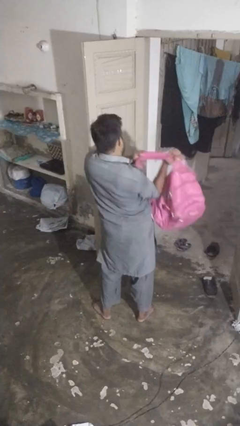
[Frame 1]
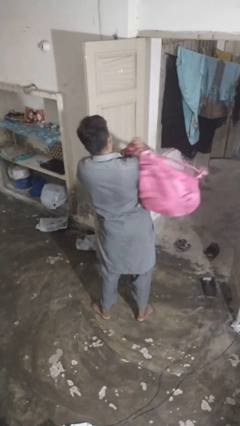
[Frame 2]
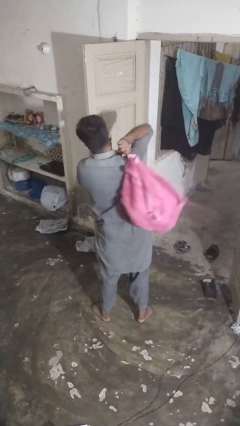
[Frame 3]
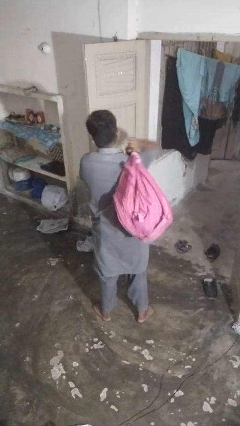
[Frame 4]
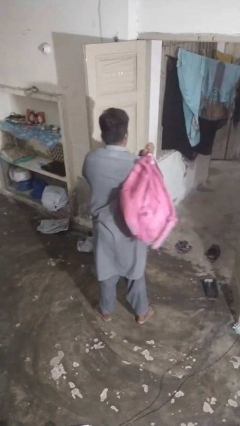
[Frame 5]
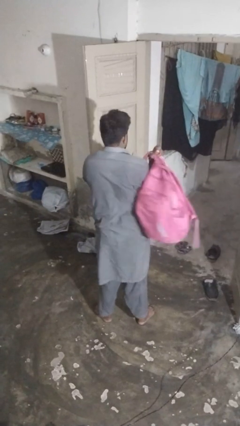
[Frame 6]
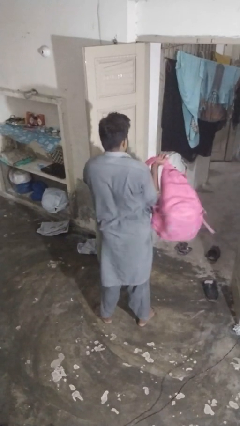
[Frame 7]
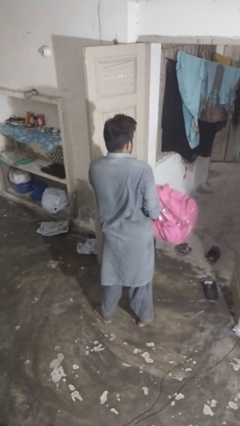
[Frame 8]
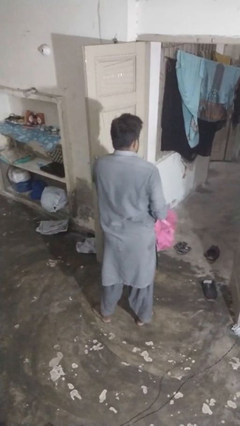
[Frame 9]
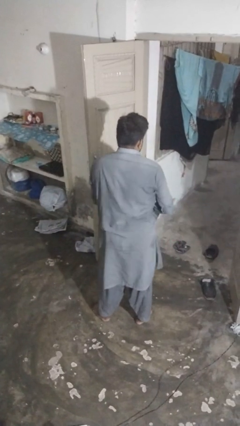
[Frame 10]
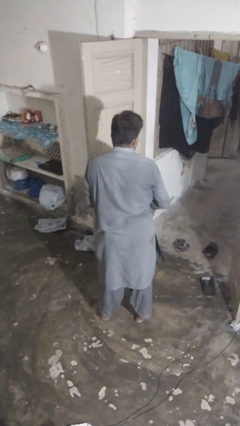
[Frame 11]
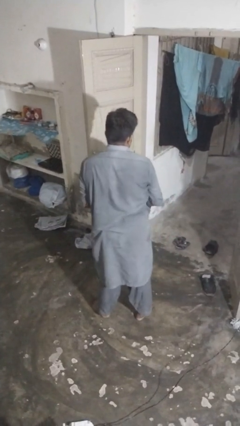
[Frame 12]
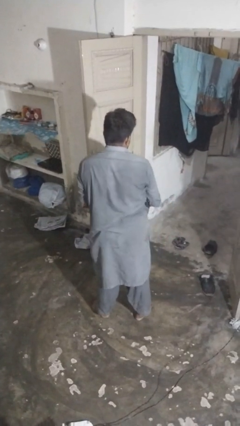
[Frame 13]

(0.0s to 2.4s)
person takes off backpack

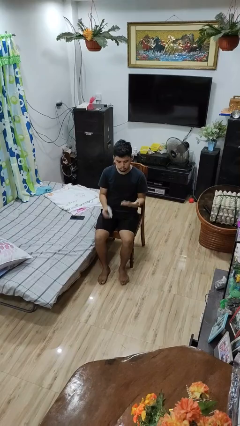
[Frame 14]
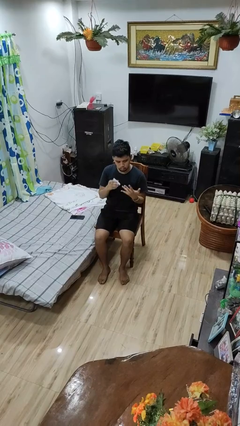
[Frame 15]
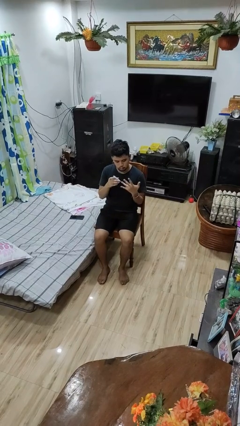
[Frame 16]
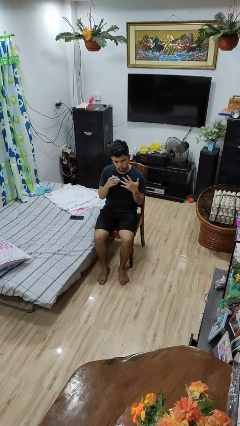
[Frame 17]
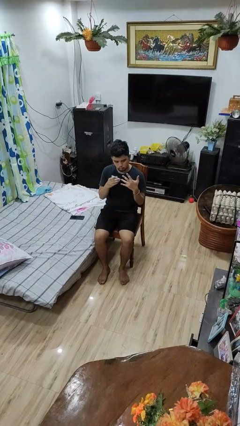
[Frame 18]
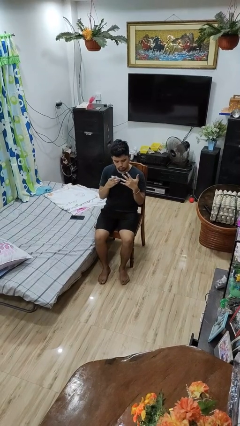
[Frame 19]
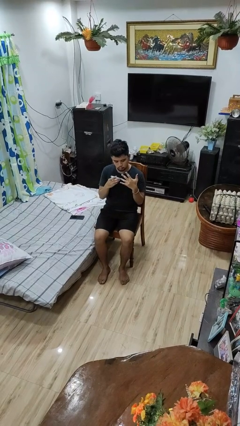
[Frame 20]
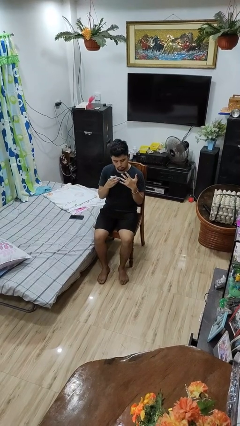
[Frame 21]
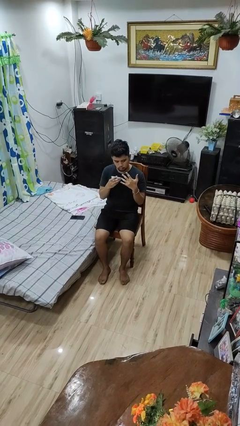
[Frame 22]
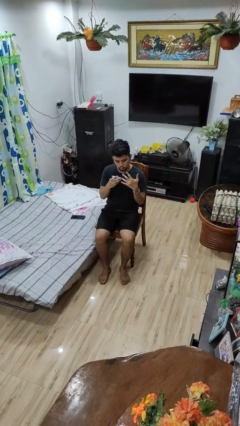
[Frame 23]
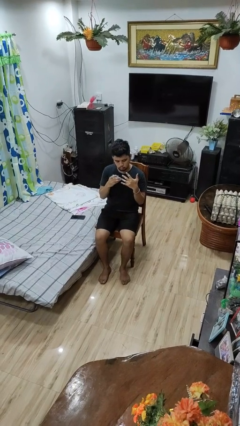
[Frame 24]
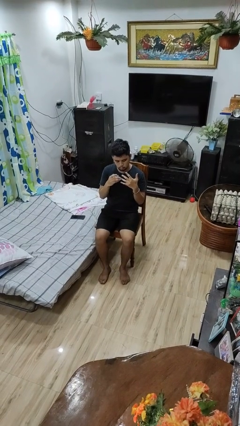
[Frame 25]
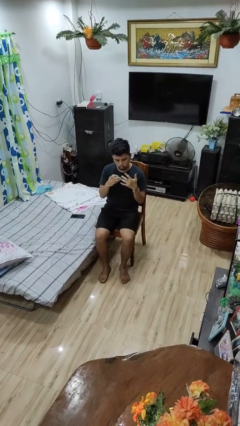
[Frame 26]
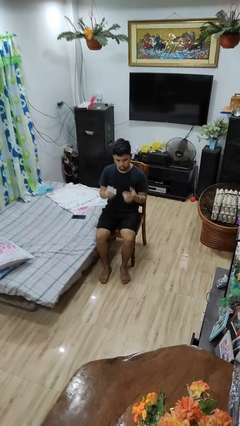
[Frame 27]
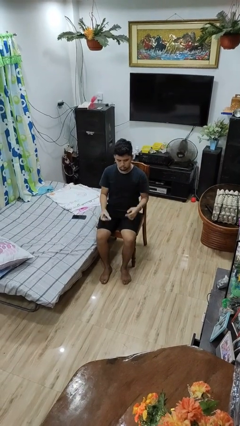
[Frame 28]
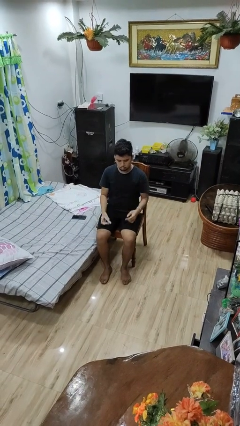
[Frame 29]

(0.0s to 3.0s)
person clips fingernails

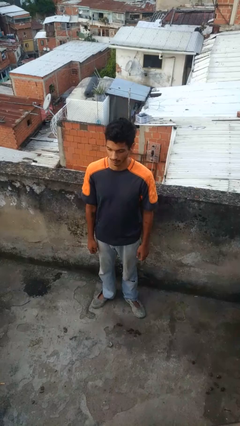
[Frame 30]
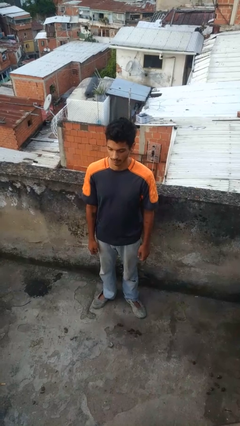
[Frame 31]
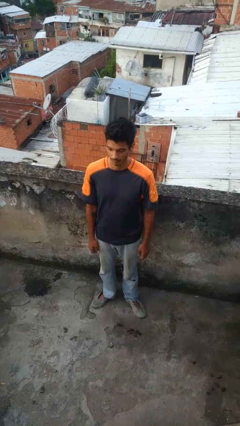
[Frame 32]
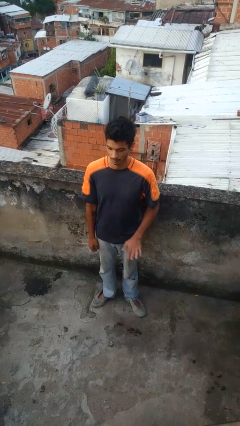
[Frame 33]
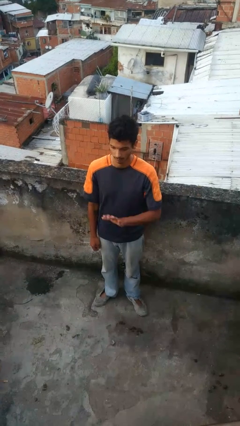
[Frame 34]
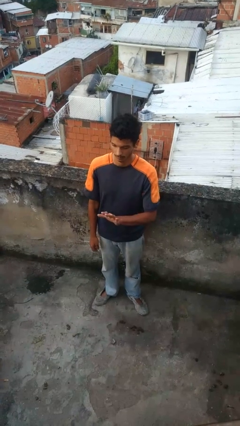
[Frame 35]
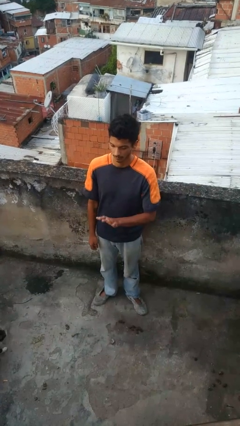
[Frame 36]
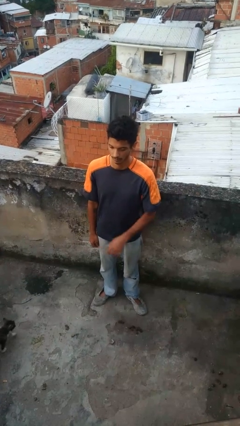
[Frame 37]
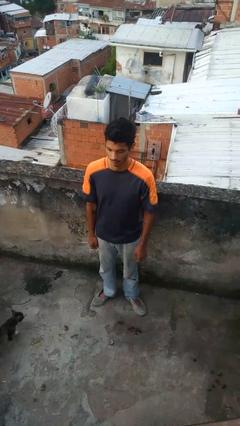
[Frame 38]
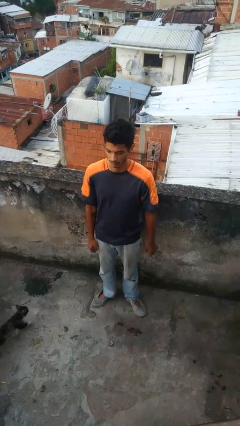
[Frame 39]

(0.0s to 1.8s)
person gestures number five

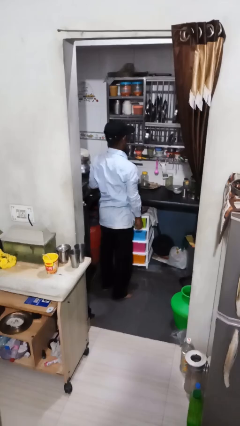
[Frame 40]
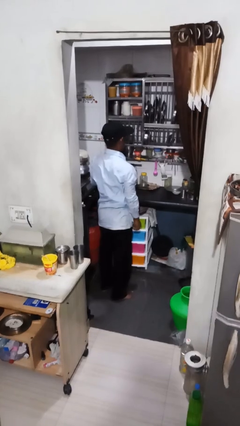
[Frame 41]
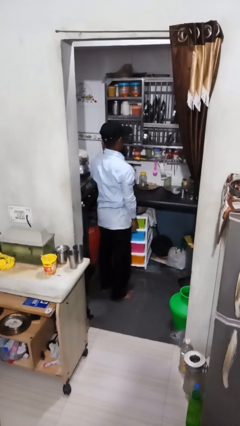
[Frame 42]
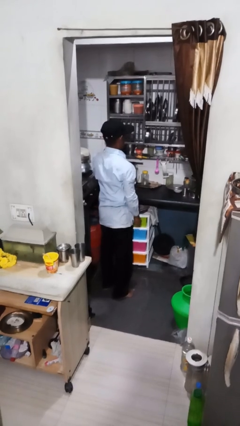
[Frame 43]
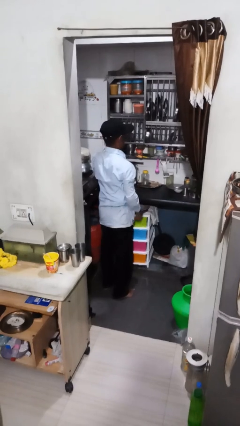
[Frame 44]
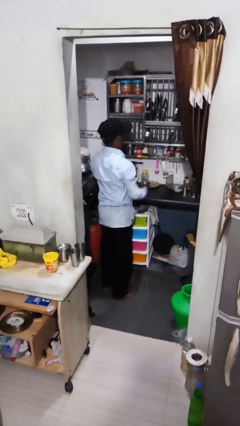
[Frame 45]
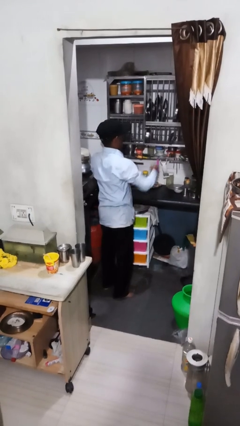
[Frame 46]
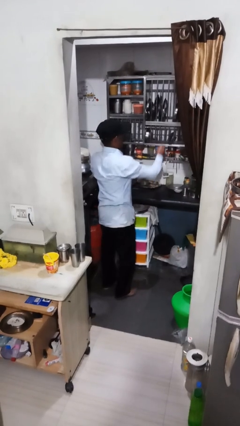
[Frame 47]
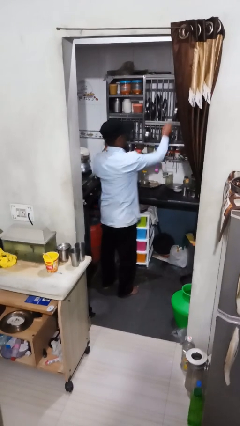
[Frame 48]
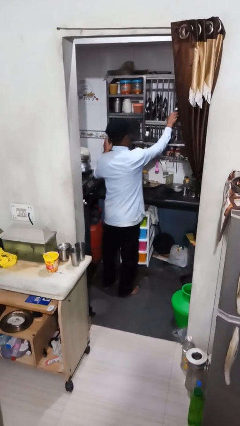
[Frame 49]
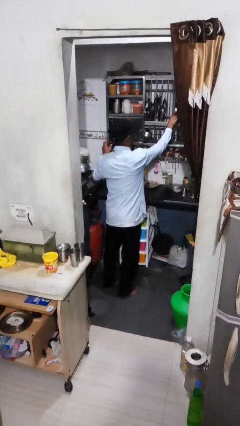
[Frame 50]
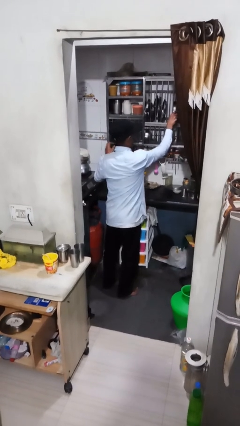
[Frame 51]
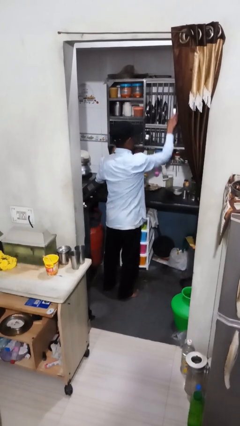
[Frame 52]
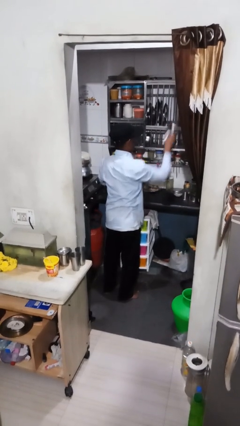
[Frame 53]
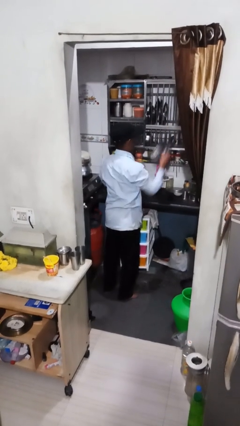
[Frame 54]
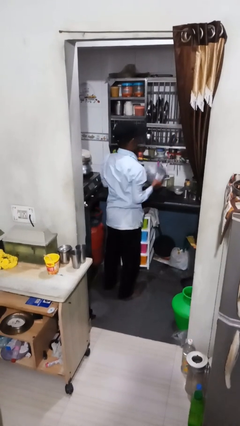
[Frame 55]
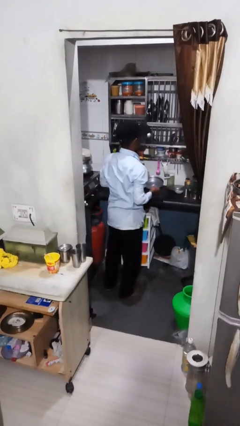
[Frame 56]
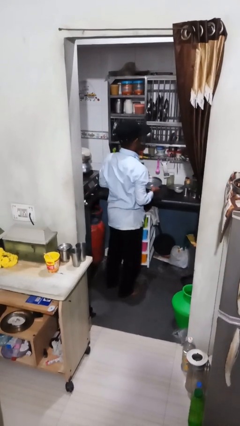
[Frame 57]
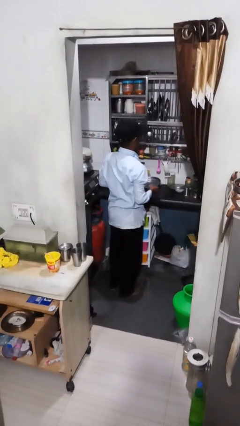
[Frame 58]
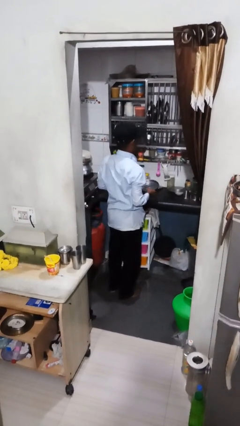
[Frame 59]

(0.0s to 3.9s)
person takes object from cabinet

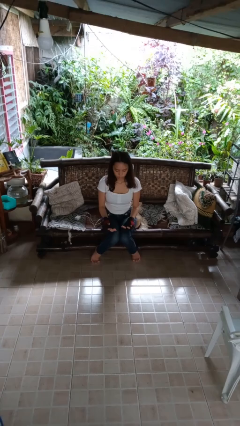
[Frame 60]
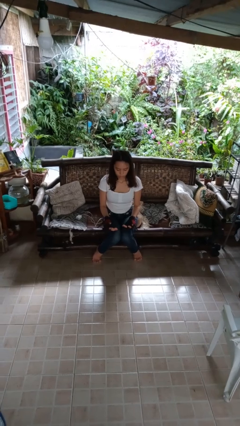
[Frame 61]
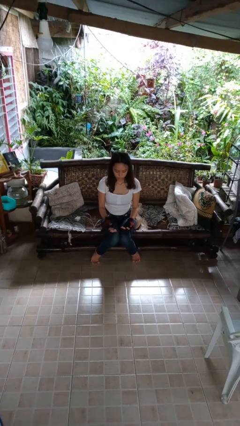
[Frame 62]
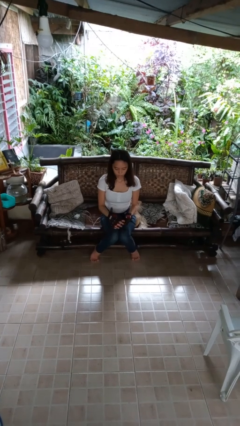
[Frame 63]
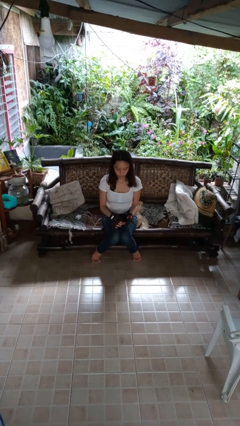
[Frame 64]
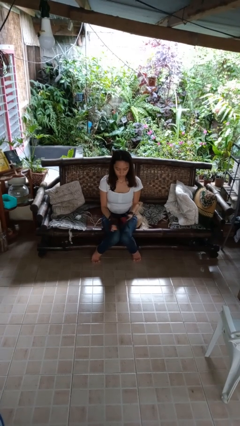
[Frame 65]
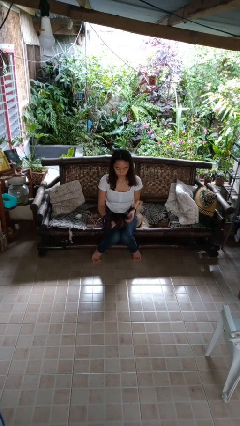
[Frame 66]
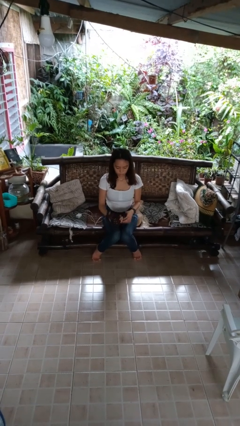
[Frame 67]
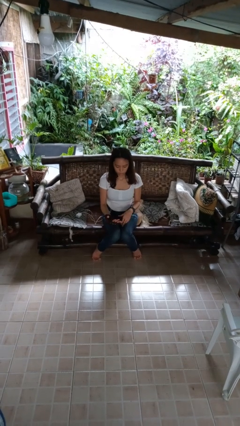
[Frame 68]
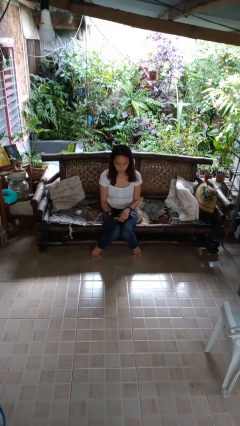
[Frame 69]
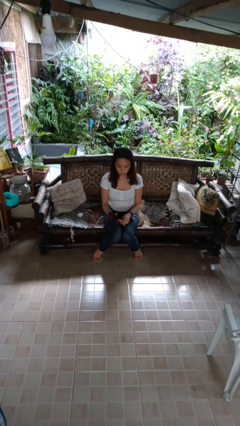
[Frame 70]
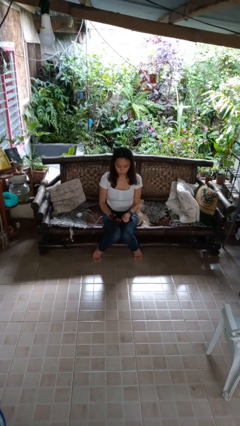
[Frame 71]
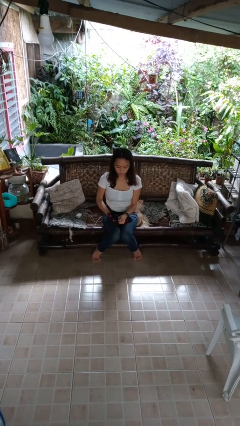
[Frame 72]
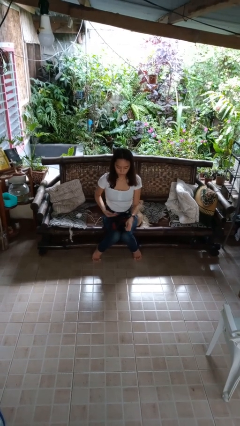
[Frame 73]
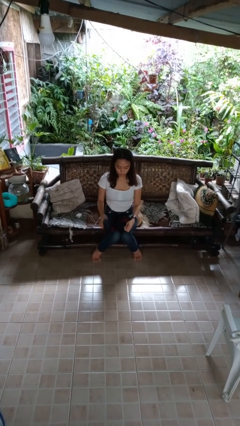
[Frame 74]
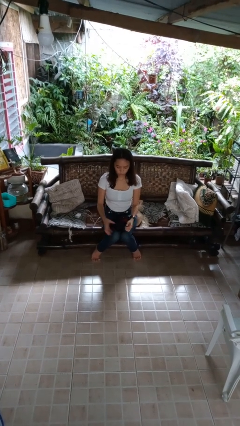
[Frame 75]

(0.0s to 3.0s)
person takes off gloves

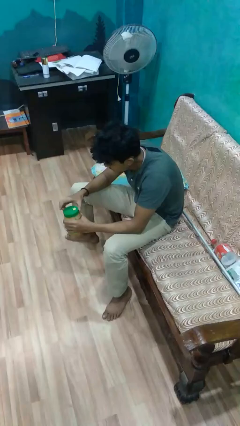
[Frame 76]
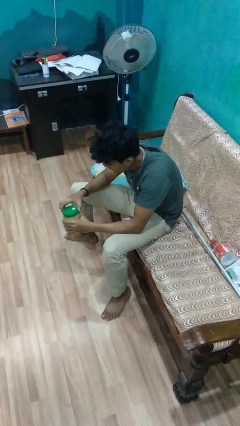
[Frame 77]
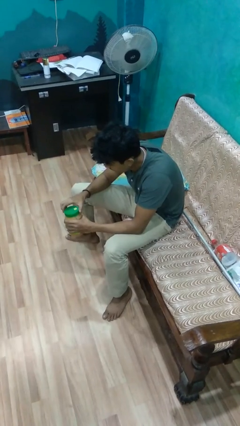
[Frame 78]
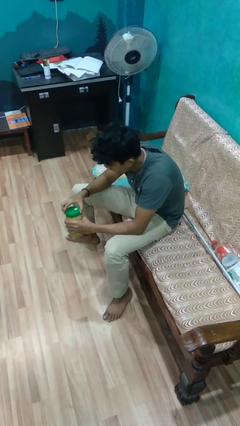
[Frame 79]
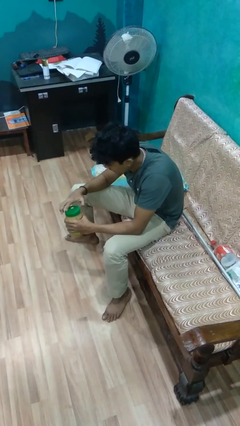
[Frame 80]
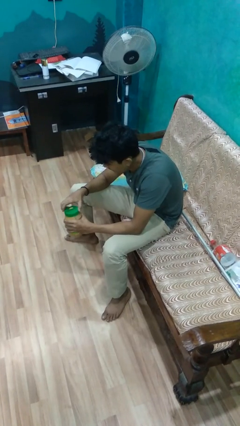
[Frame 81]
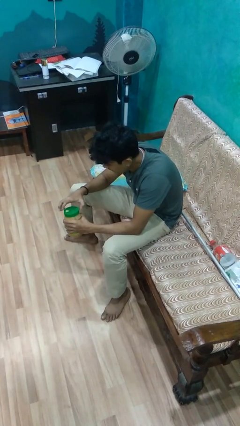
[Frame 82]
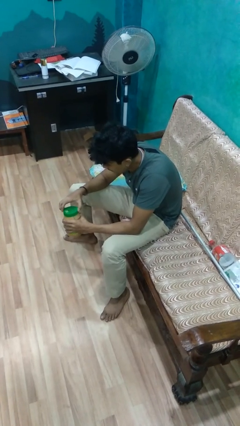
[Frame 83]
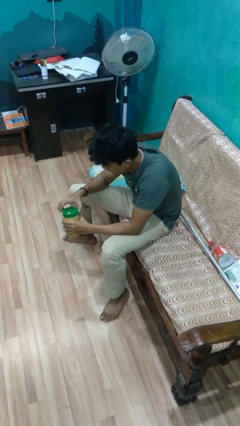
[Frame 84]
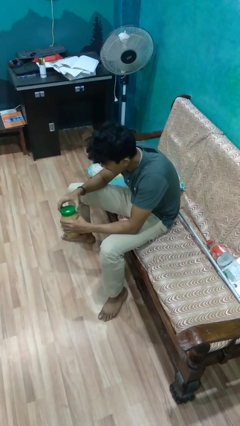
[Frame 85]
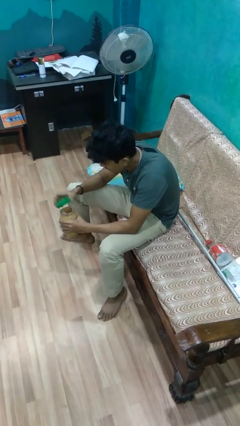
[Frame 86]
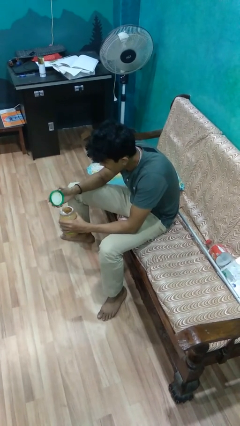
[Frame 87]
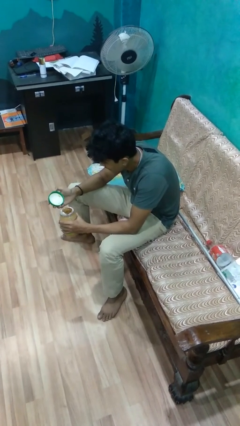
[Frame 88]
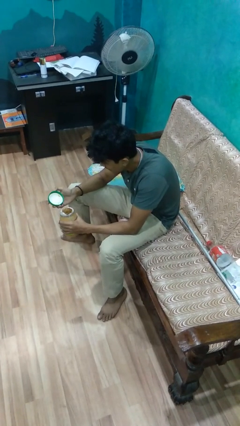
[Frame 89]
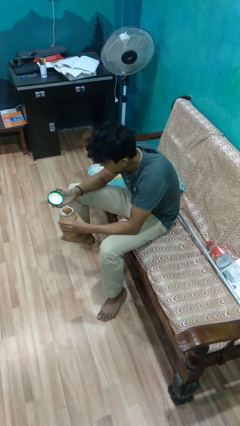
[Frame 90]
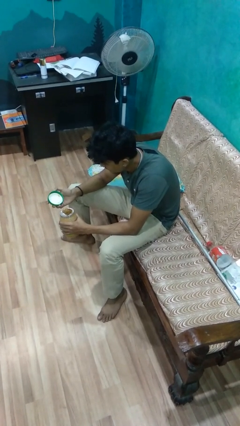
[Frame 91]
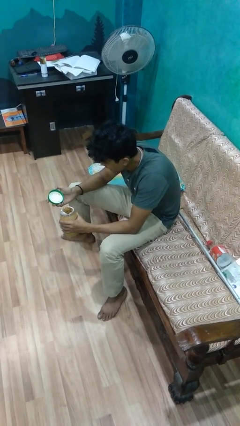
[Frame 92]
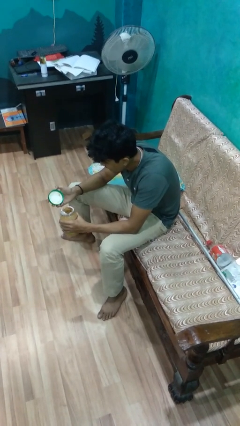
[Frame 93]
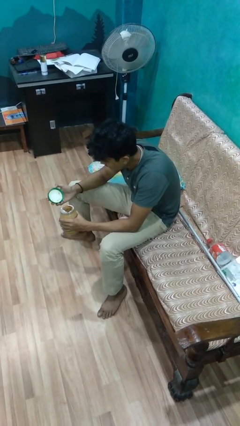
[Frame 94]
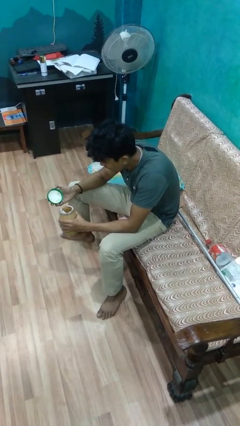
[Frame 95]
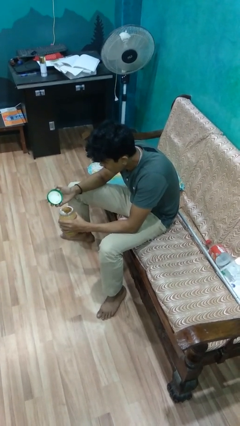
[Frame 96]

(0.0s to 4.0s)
person opens jar
